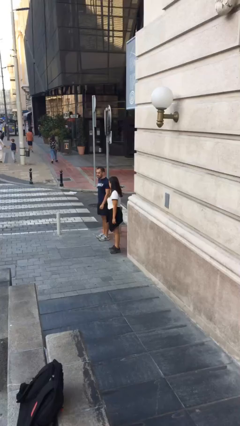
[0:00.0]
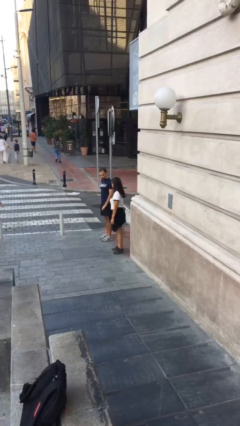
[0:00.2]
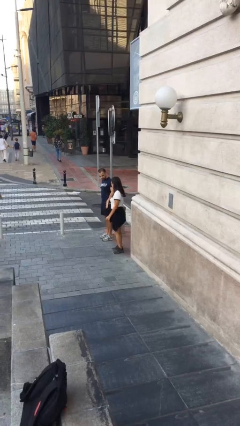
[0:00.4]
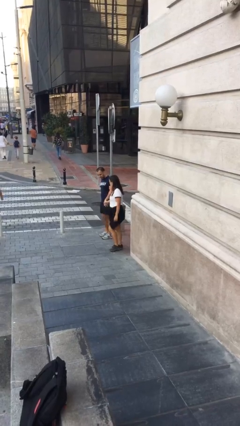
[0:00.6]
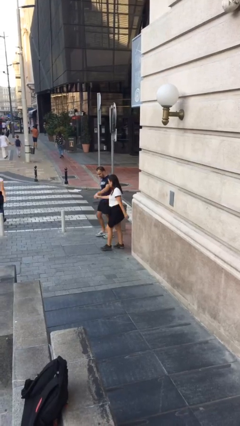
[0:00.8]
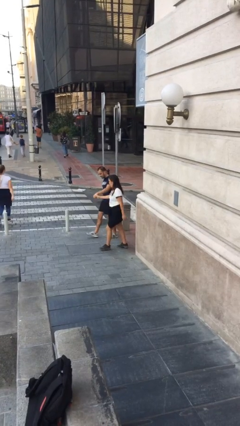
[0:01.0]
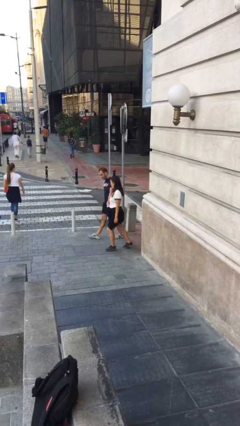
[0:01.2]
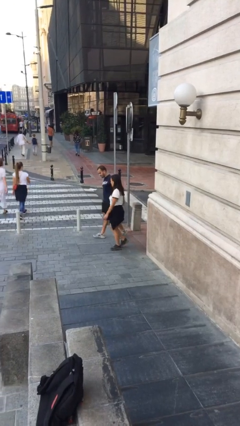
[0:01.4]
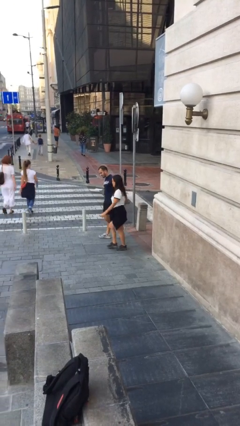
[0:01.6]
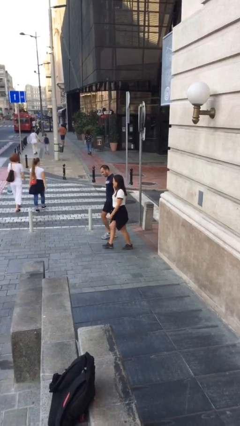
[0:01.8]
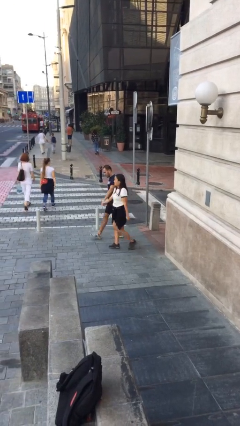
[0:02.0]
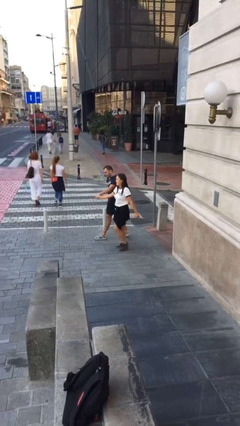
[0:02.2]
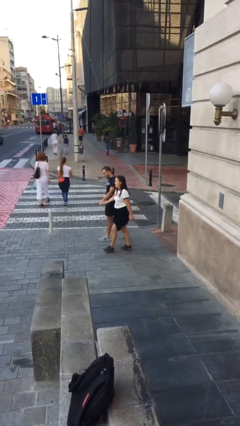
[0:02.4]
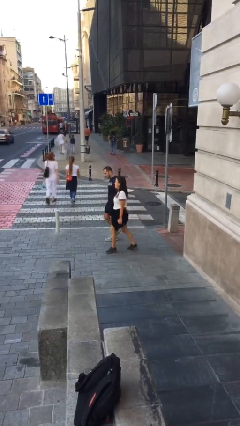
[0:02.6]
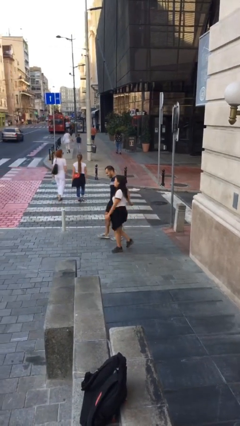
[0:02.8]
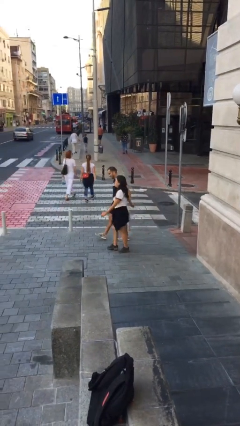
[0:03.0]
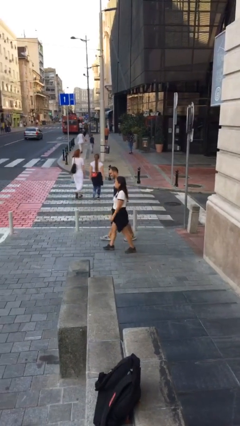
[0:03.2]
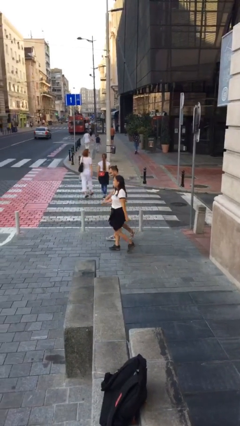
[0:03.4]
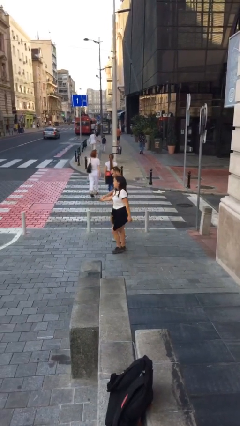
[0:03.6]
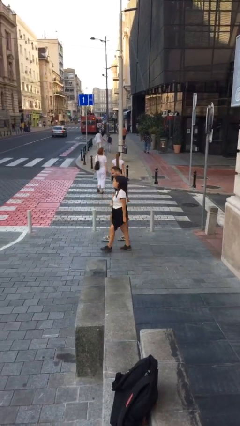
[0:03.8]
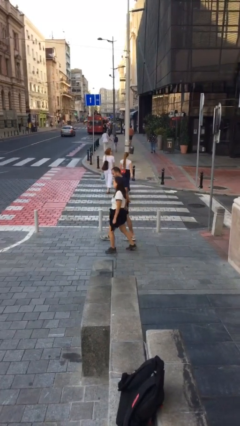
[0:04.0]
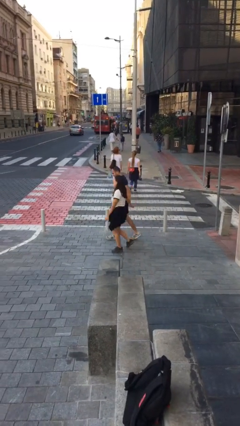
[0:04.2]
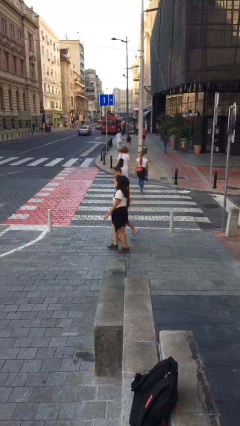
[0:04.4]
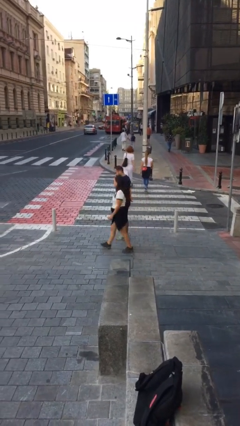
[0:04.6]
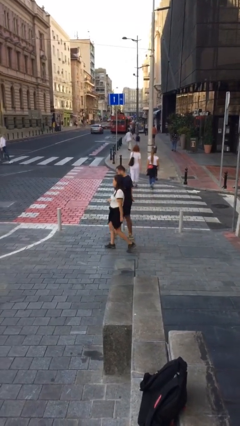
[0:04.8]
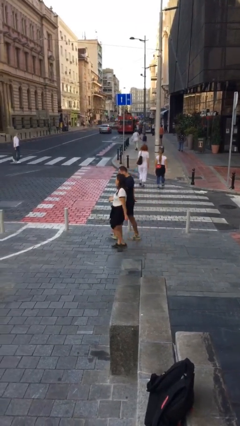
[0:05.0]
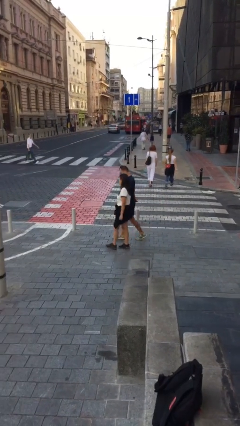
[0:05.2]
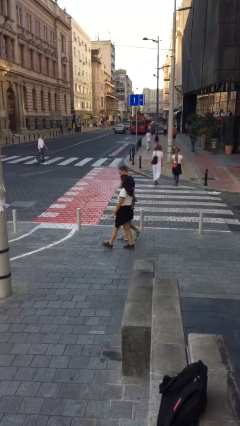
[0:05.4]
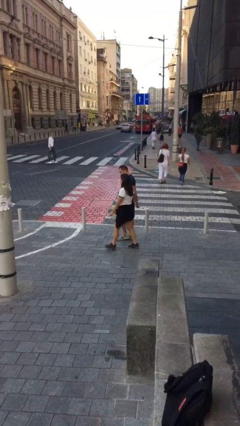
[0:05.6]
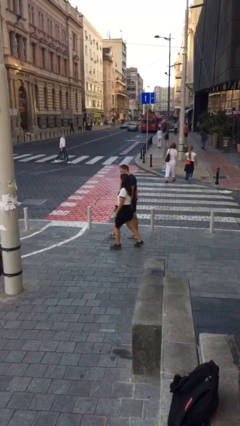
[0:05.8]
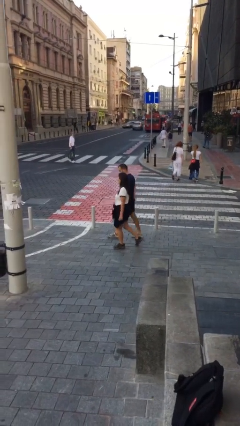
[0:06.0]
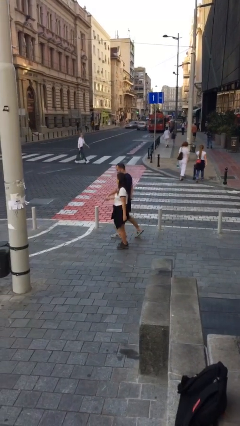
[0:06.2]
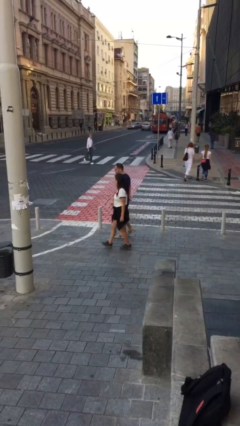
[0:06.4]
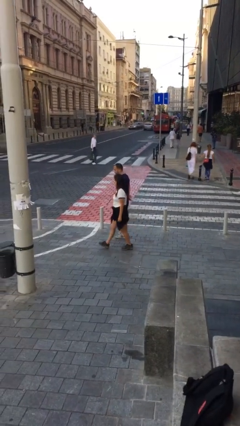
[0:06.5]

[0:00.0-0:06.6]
person holds hand

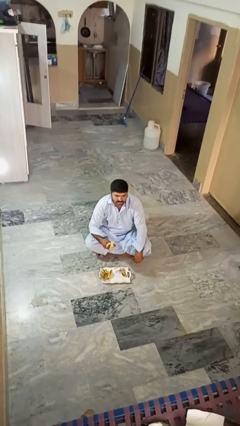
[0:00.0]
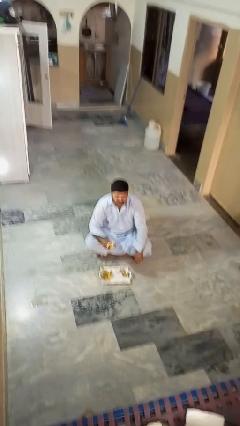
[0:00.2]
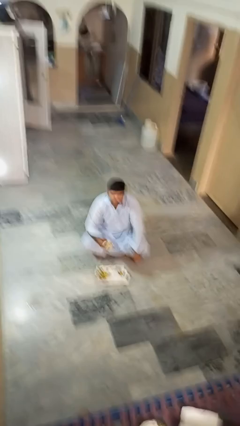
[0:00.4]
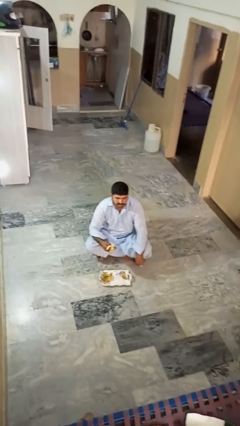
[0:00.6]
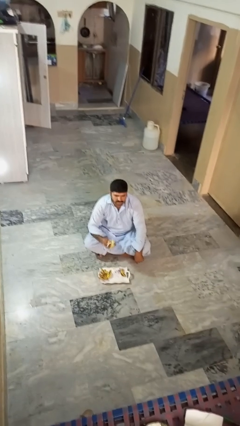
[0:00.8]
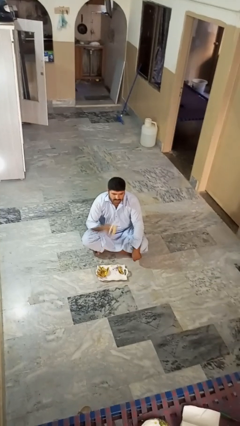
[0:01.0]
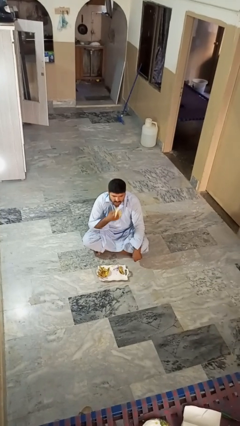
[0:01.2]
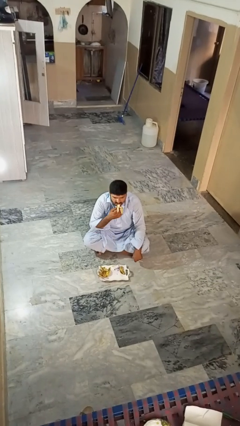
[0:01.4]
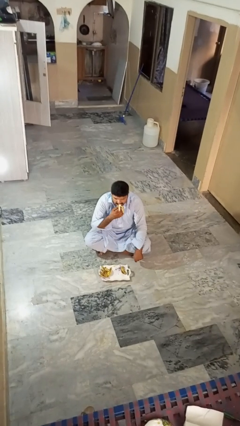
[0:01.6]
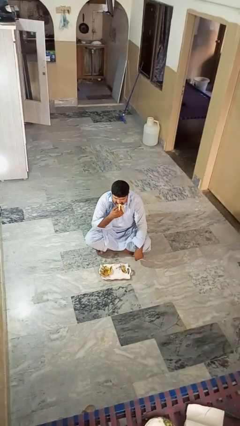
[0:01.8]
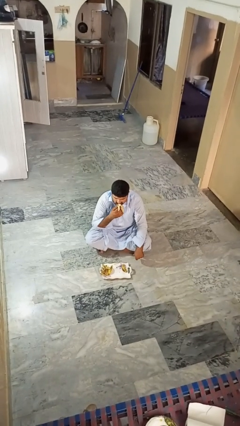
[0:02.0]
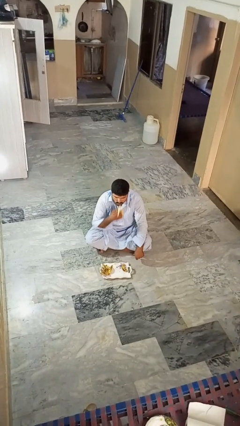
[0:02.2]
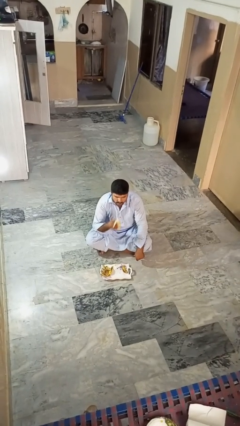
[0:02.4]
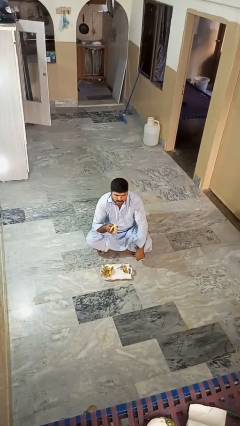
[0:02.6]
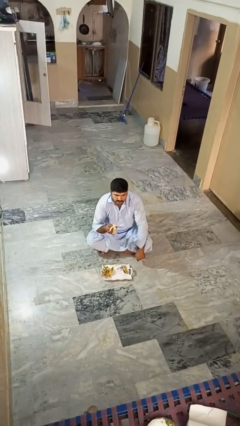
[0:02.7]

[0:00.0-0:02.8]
person eats banana

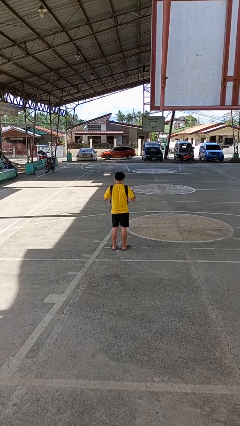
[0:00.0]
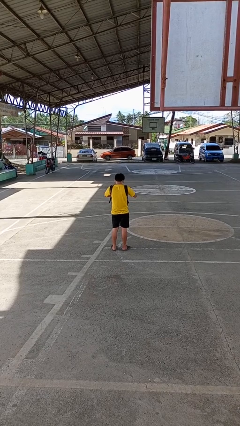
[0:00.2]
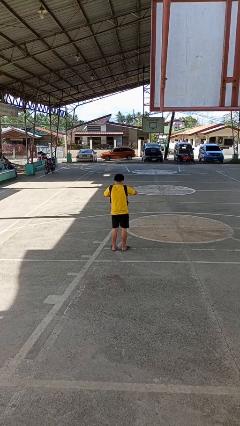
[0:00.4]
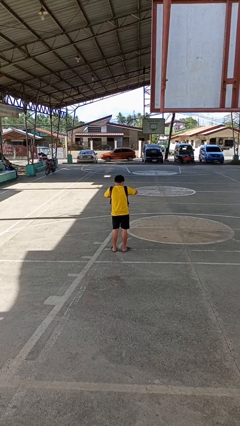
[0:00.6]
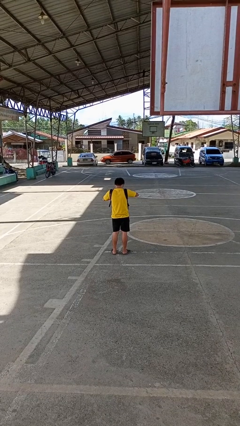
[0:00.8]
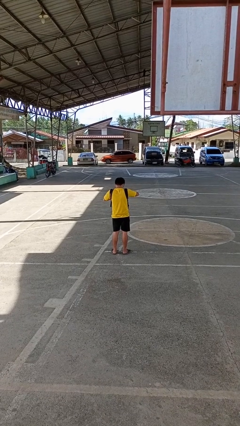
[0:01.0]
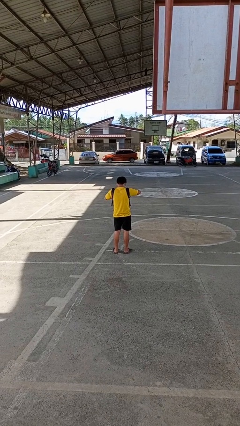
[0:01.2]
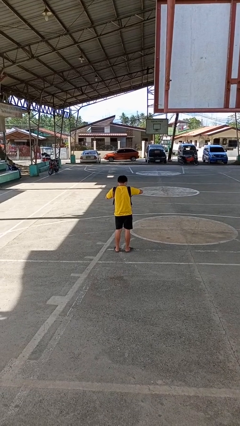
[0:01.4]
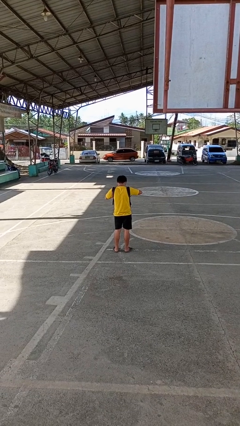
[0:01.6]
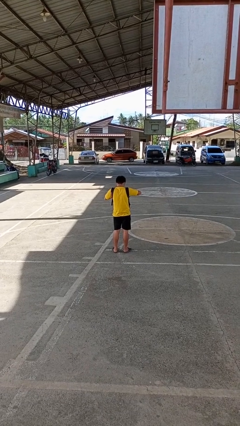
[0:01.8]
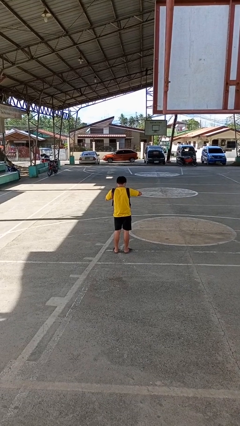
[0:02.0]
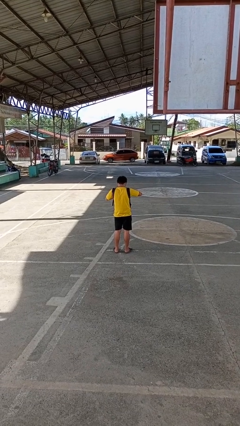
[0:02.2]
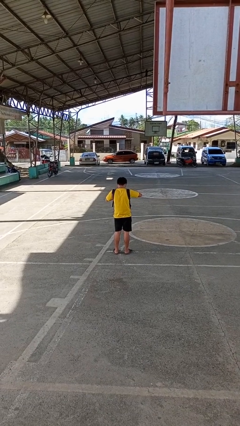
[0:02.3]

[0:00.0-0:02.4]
person searches in backpack

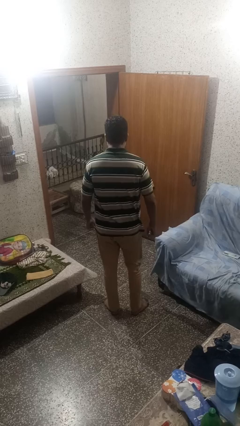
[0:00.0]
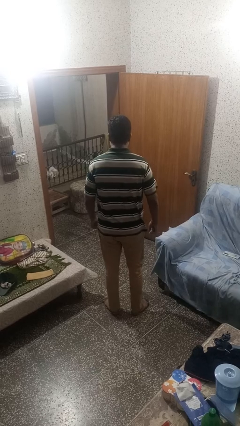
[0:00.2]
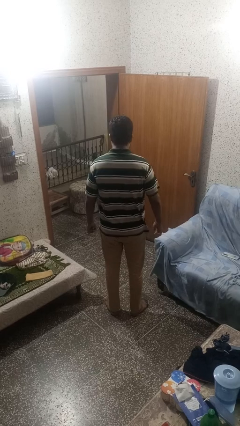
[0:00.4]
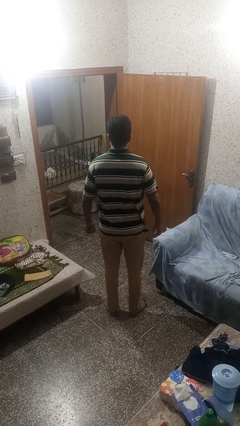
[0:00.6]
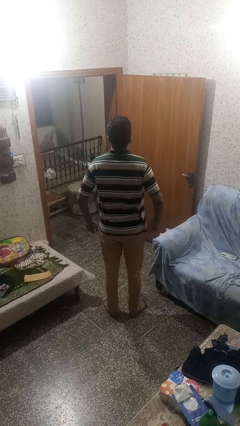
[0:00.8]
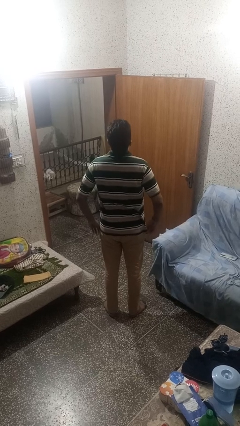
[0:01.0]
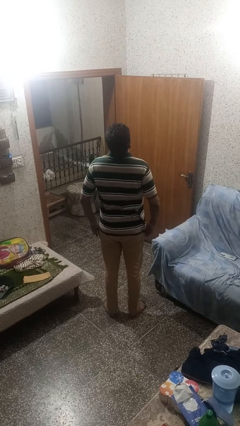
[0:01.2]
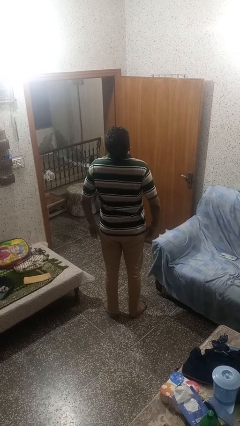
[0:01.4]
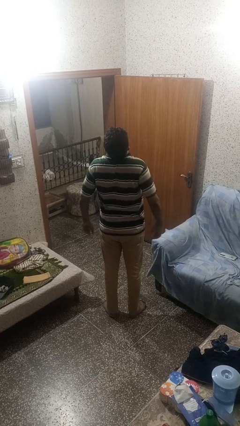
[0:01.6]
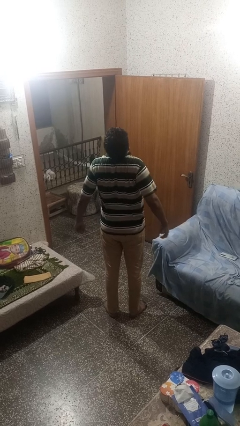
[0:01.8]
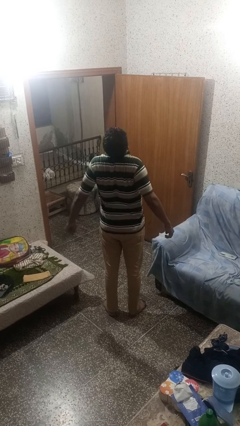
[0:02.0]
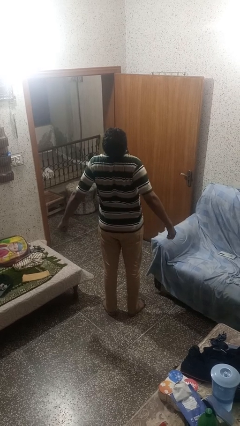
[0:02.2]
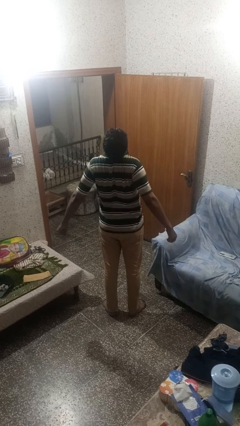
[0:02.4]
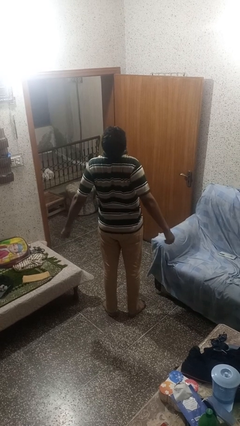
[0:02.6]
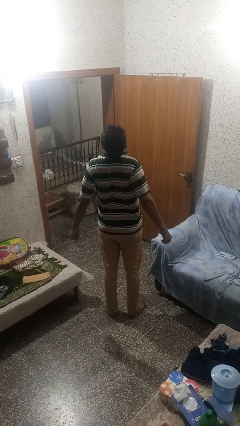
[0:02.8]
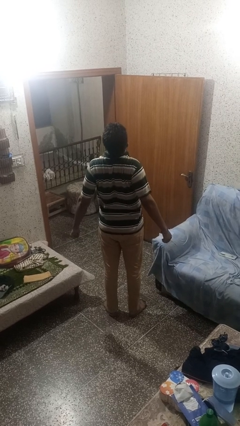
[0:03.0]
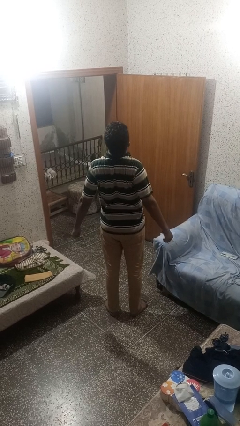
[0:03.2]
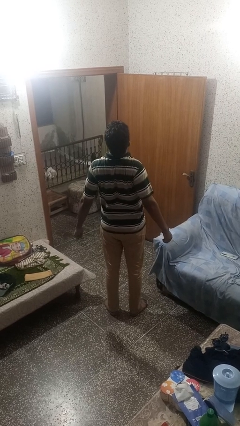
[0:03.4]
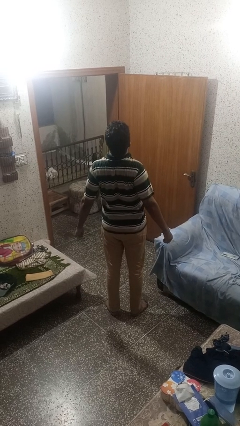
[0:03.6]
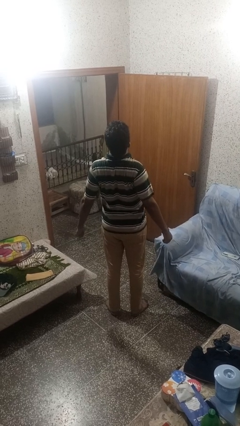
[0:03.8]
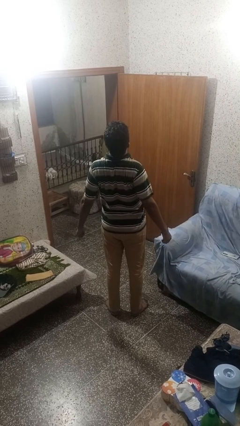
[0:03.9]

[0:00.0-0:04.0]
person stretches back

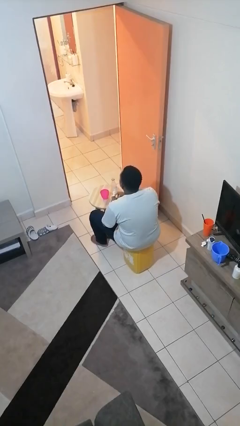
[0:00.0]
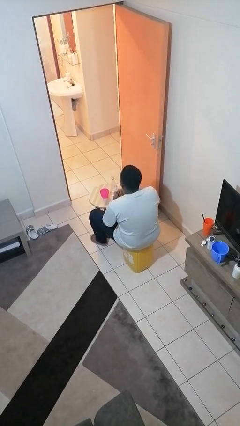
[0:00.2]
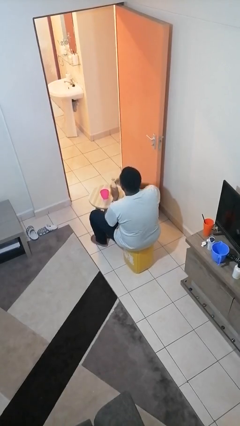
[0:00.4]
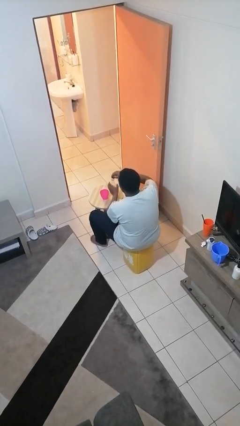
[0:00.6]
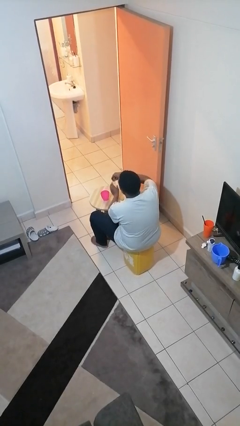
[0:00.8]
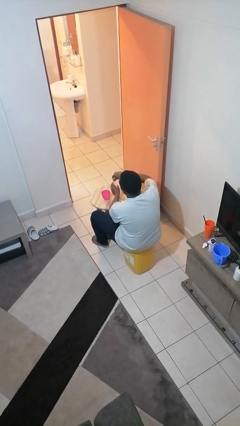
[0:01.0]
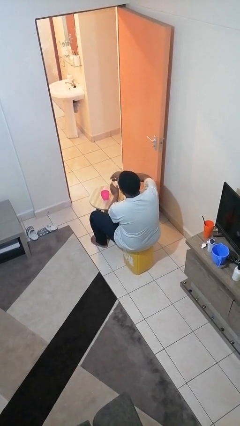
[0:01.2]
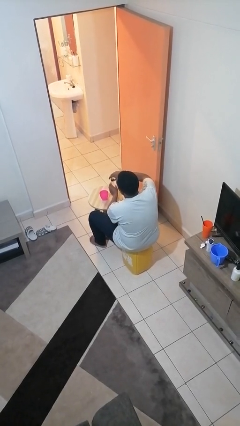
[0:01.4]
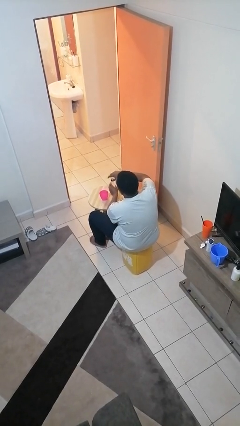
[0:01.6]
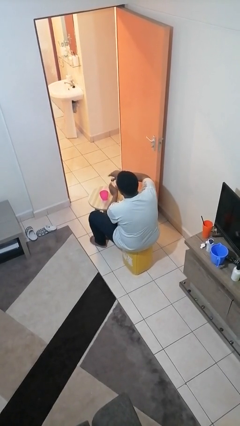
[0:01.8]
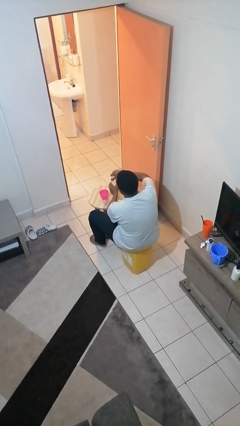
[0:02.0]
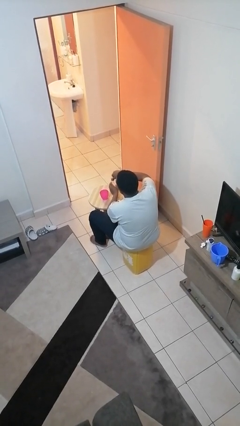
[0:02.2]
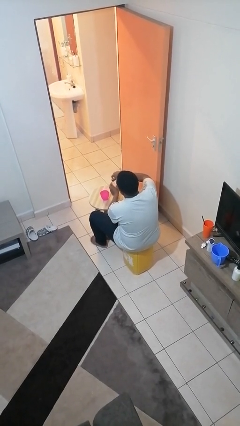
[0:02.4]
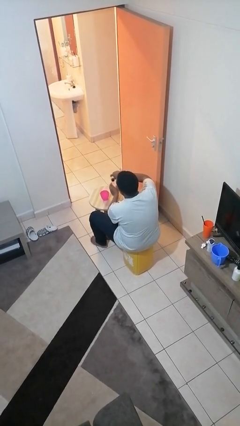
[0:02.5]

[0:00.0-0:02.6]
person screws lid to bottle
